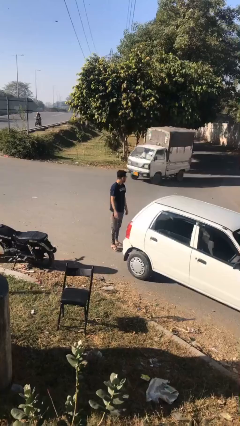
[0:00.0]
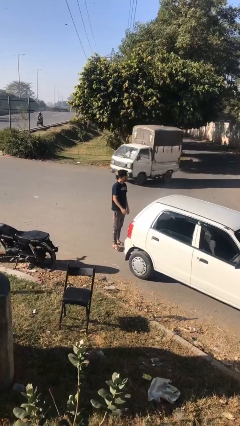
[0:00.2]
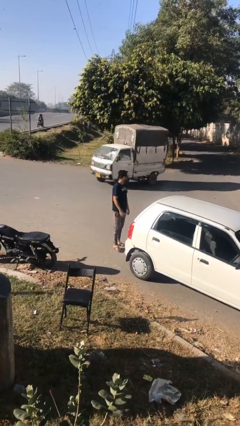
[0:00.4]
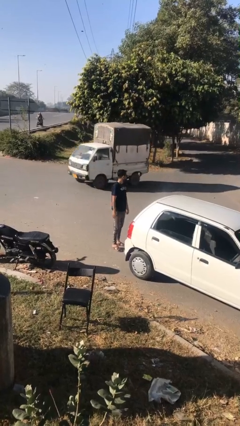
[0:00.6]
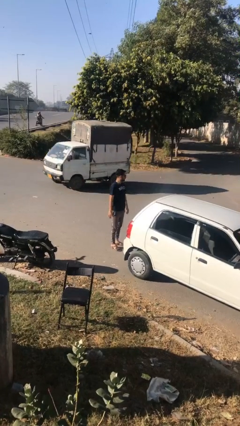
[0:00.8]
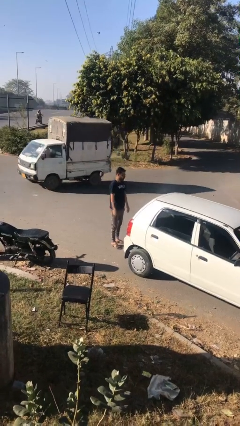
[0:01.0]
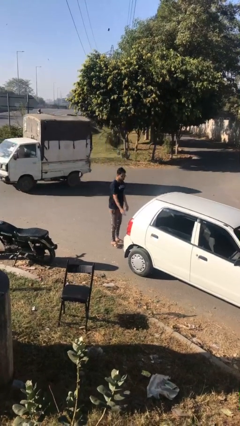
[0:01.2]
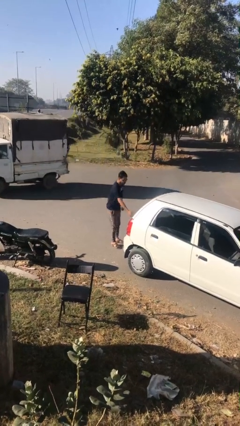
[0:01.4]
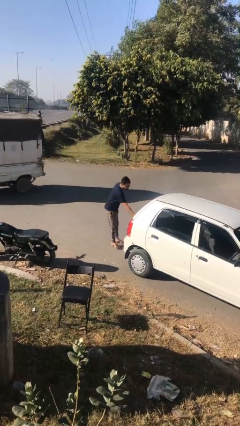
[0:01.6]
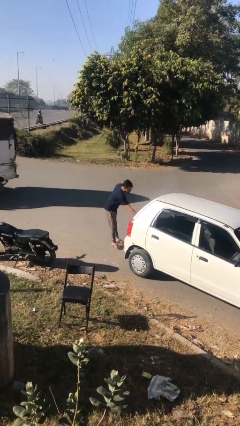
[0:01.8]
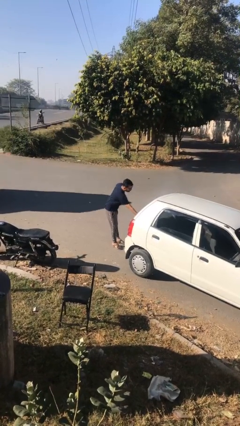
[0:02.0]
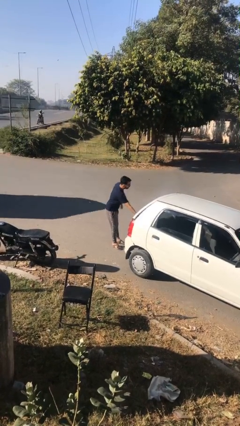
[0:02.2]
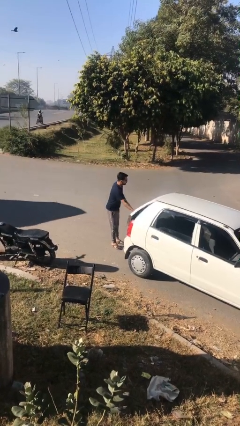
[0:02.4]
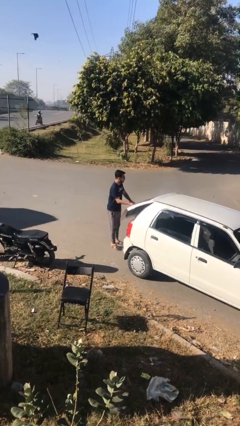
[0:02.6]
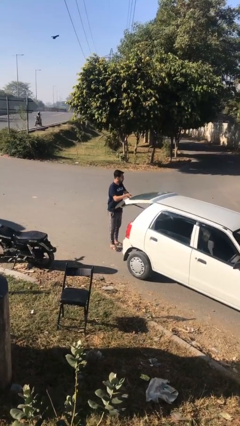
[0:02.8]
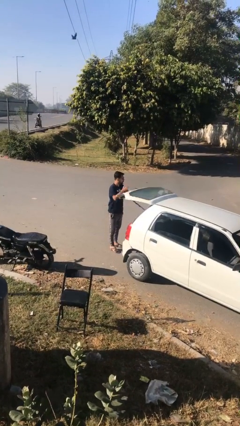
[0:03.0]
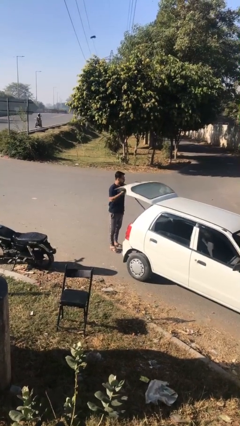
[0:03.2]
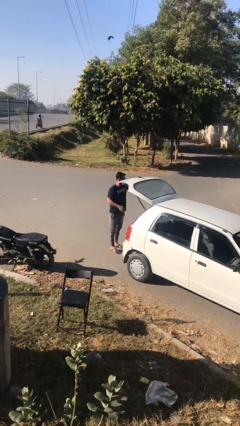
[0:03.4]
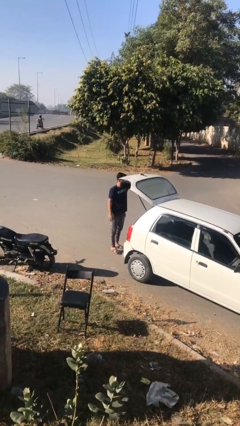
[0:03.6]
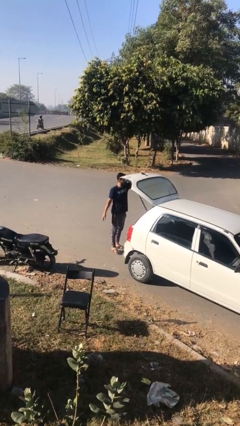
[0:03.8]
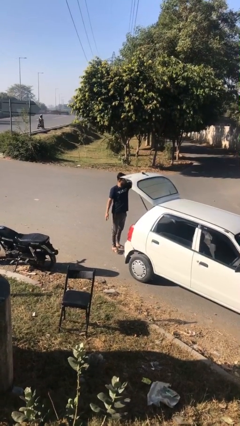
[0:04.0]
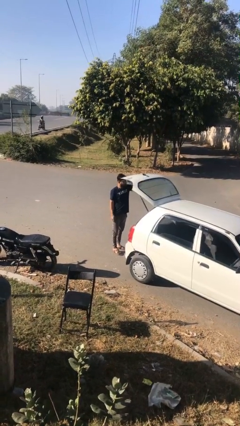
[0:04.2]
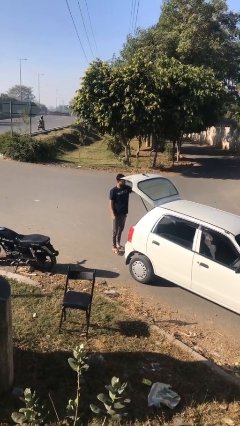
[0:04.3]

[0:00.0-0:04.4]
person opens car trunk

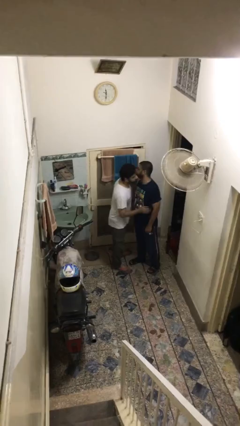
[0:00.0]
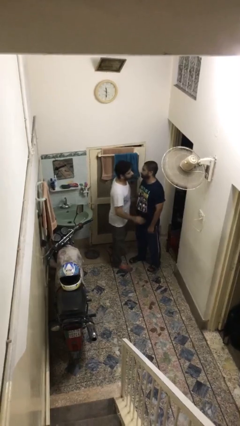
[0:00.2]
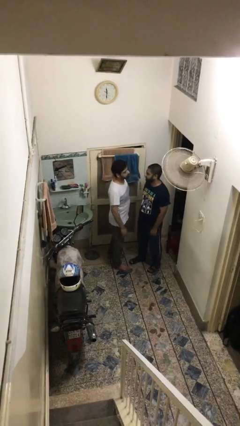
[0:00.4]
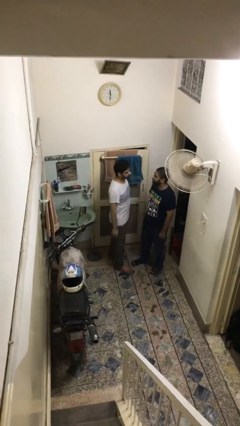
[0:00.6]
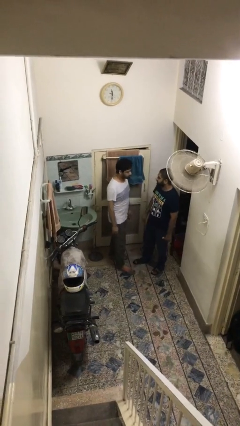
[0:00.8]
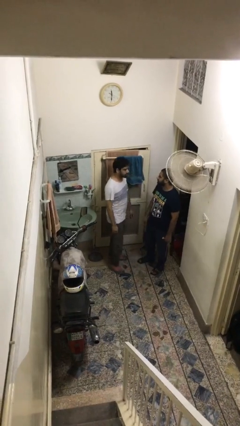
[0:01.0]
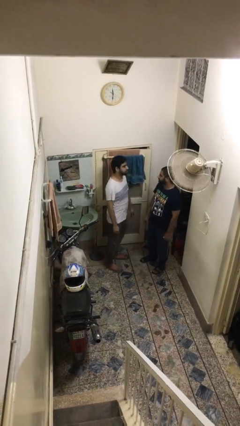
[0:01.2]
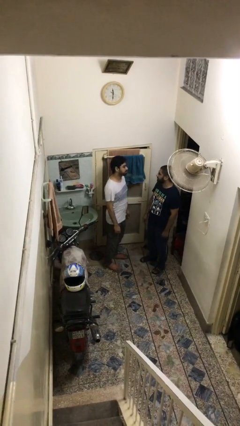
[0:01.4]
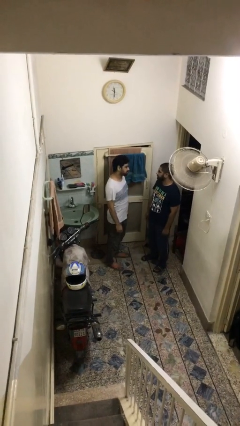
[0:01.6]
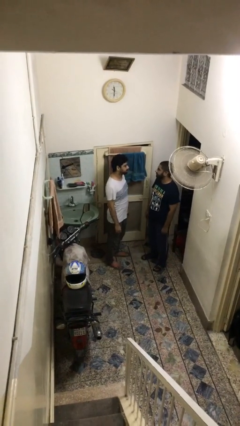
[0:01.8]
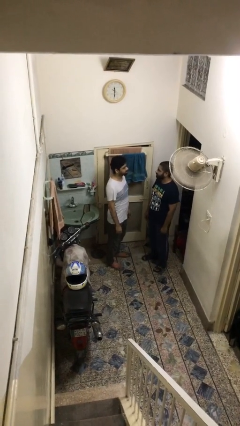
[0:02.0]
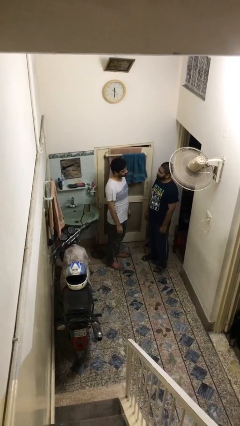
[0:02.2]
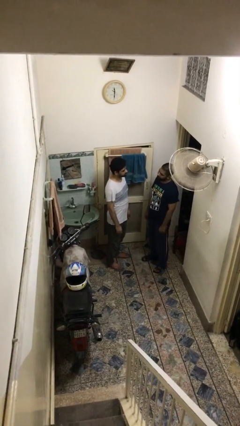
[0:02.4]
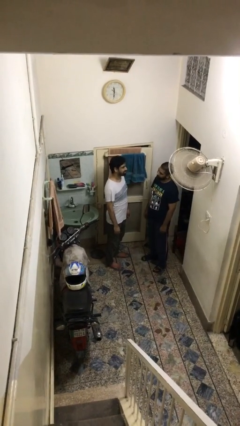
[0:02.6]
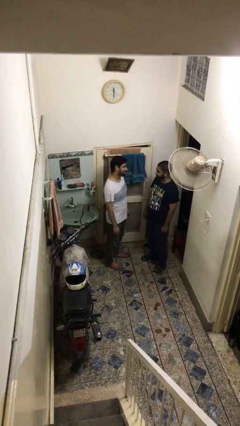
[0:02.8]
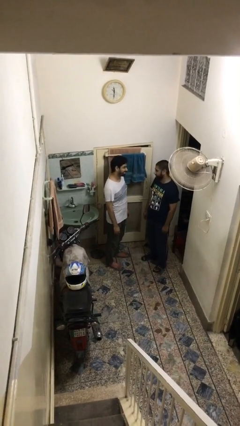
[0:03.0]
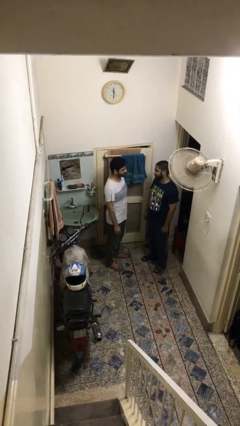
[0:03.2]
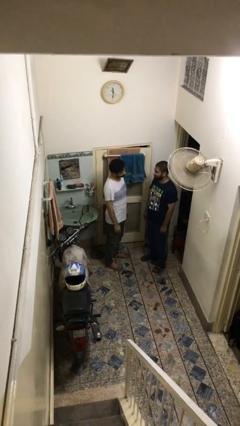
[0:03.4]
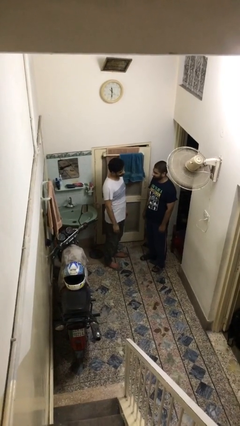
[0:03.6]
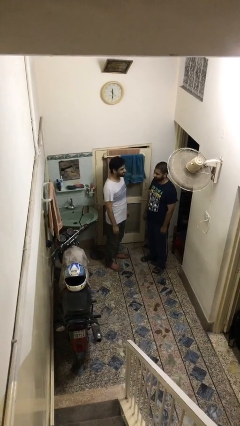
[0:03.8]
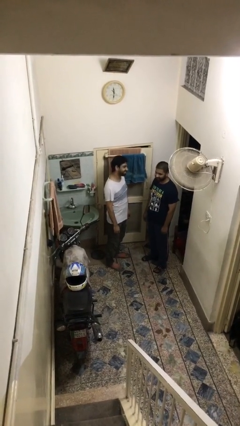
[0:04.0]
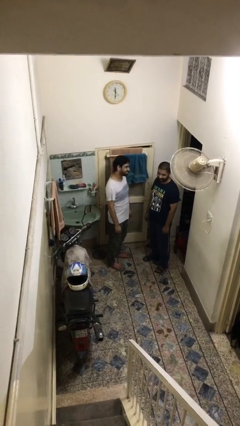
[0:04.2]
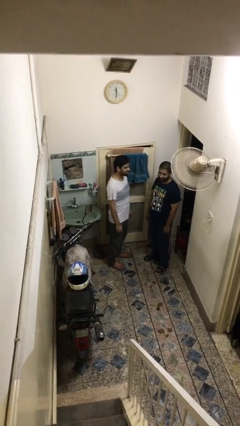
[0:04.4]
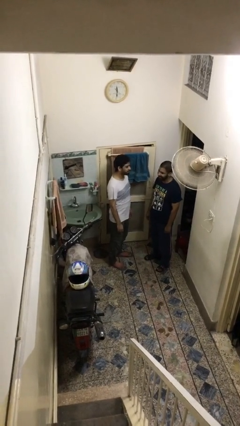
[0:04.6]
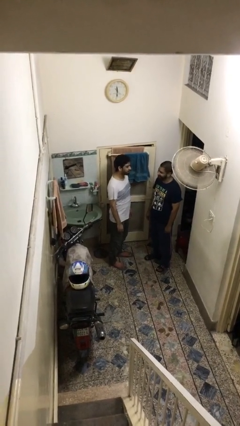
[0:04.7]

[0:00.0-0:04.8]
person talks to person

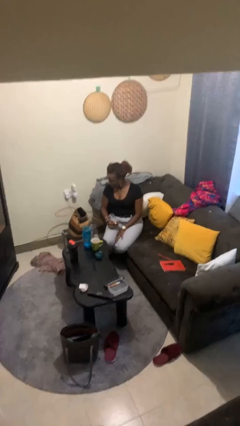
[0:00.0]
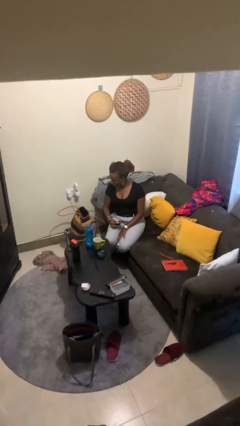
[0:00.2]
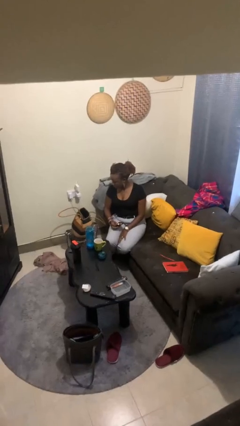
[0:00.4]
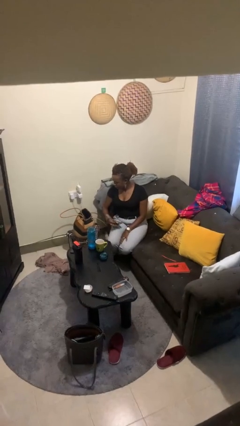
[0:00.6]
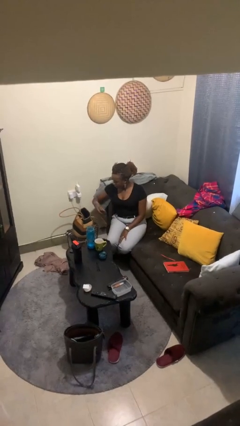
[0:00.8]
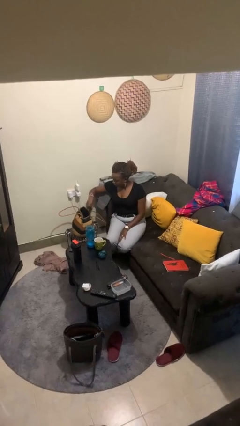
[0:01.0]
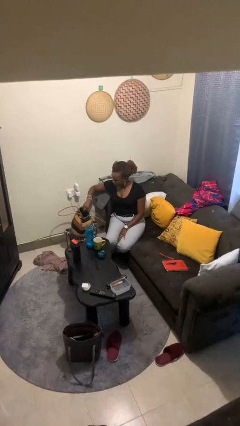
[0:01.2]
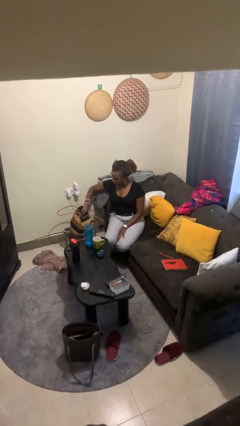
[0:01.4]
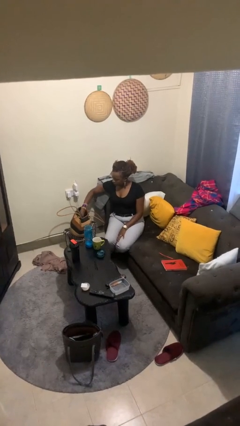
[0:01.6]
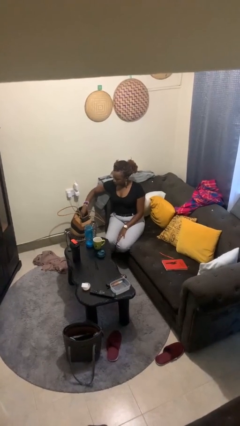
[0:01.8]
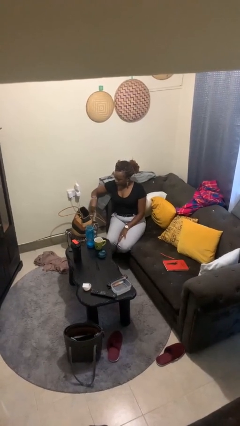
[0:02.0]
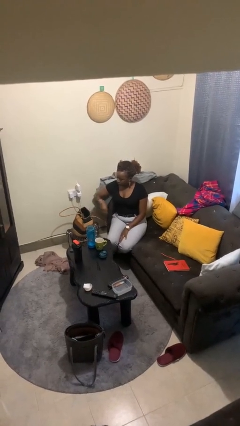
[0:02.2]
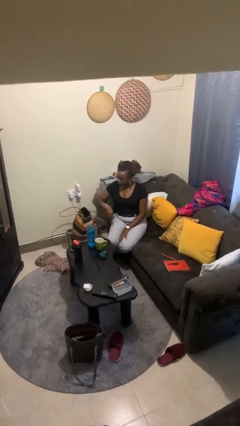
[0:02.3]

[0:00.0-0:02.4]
person puts object into purse

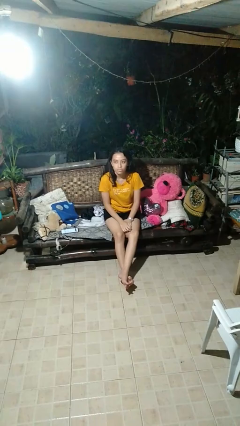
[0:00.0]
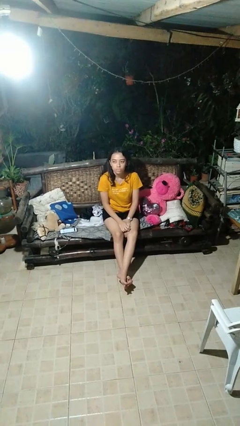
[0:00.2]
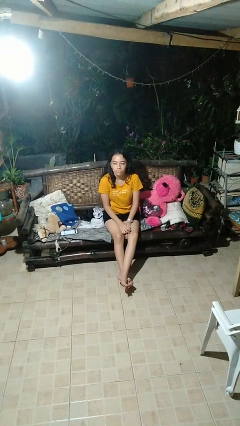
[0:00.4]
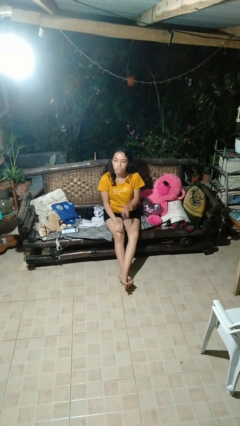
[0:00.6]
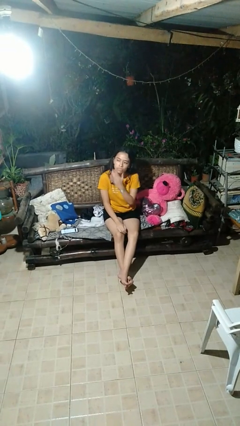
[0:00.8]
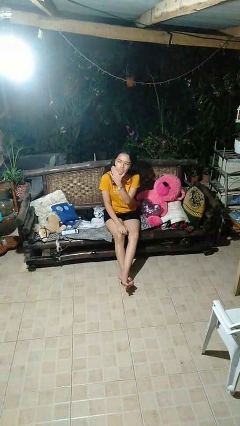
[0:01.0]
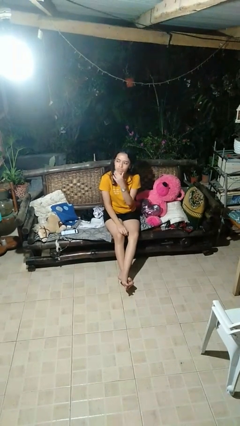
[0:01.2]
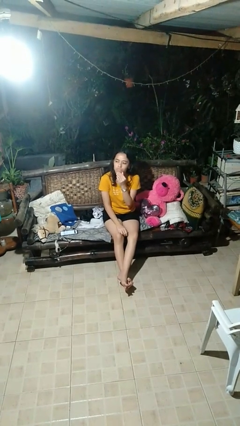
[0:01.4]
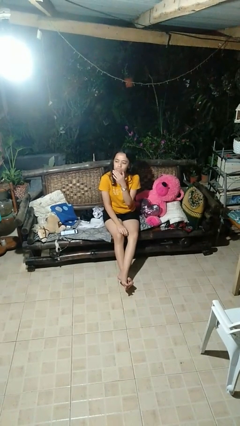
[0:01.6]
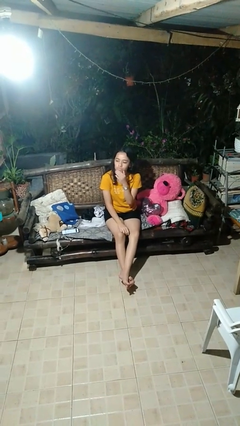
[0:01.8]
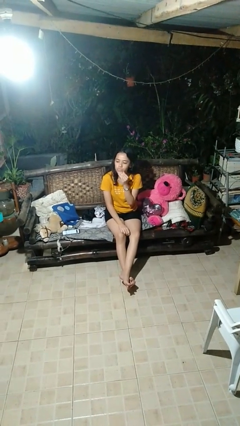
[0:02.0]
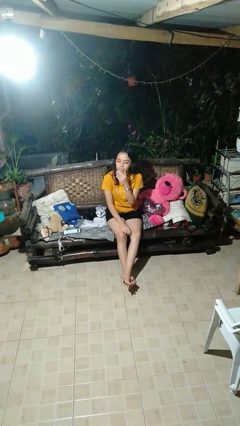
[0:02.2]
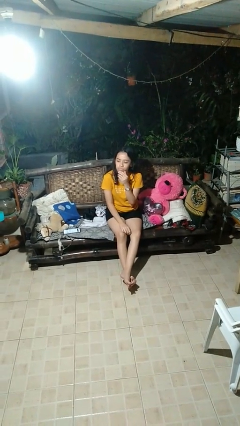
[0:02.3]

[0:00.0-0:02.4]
person strokes chin

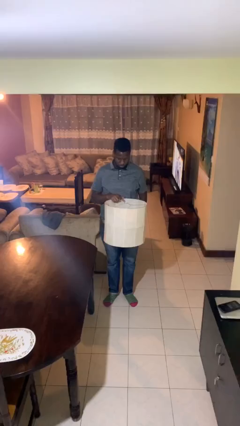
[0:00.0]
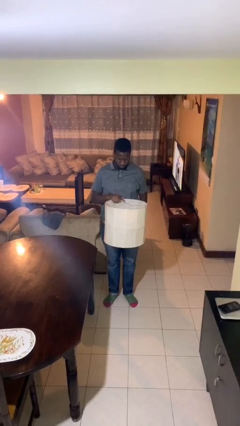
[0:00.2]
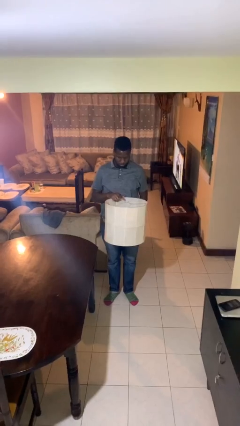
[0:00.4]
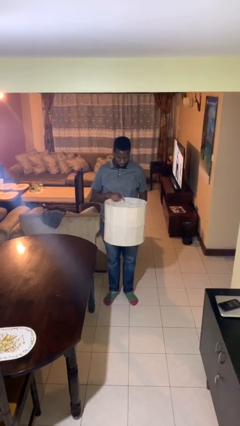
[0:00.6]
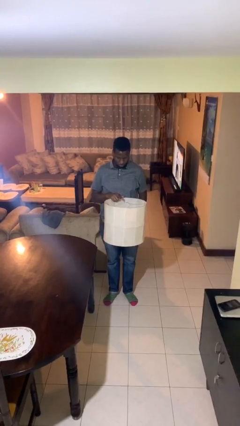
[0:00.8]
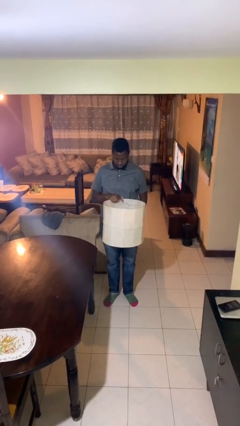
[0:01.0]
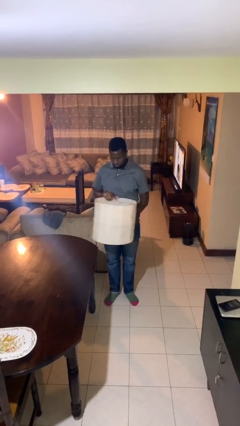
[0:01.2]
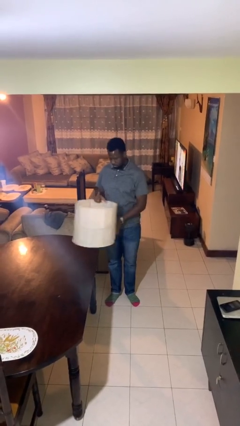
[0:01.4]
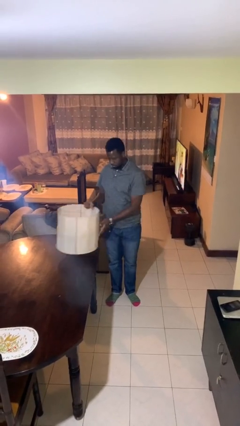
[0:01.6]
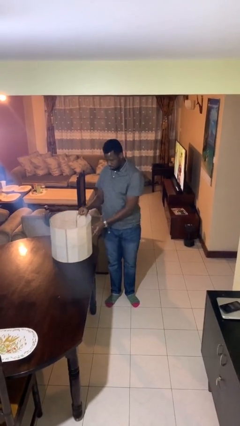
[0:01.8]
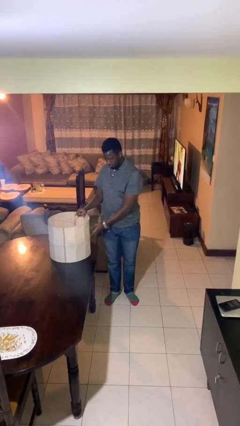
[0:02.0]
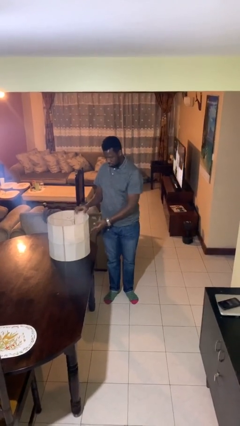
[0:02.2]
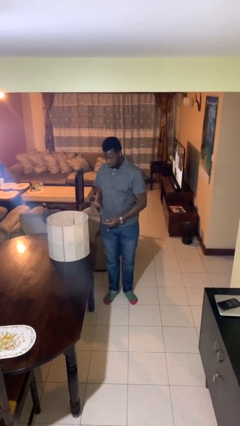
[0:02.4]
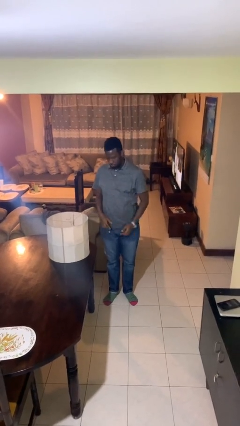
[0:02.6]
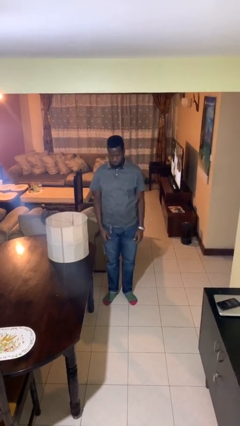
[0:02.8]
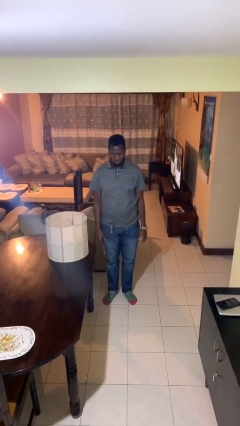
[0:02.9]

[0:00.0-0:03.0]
person puts down object on table
